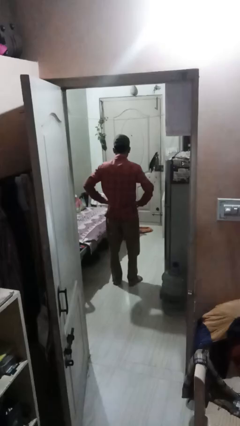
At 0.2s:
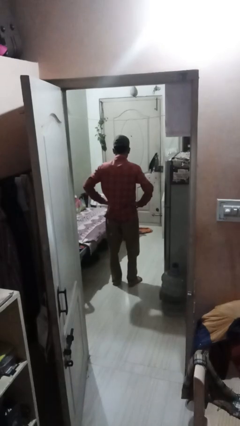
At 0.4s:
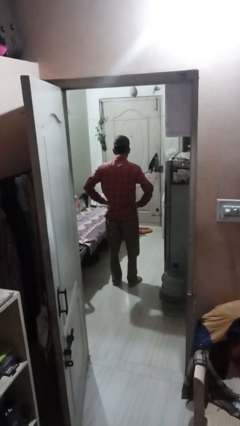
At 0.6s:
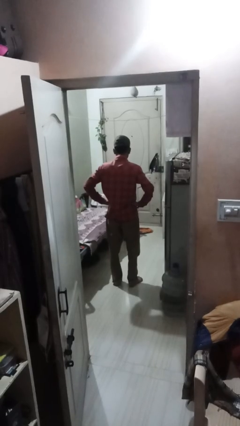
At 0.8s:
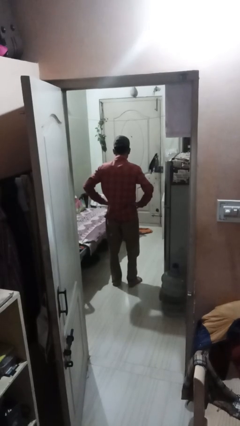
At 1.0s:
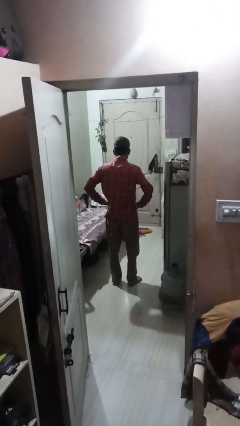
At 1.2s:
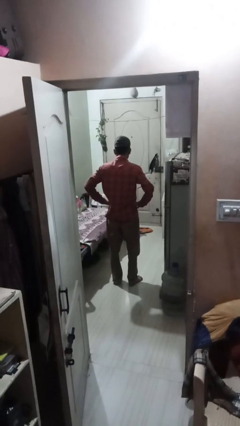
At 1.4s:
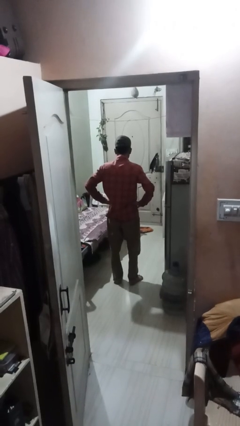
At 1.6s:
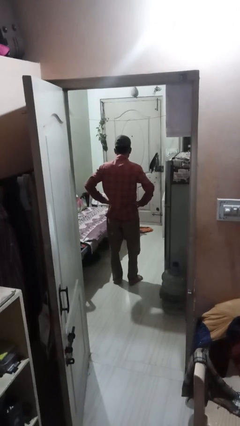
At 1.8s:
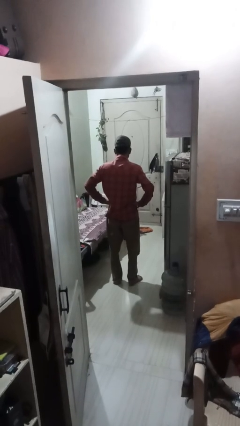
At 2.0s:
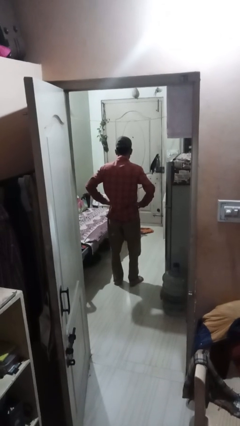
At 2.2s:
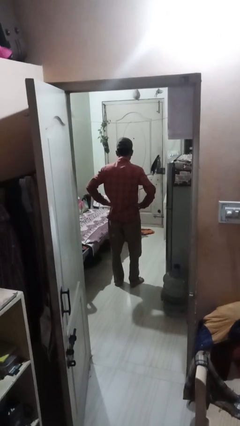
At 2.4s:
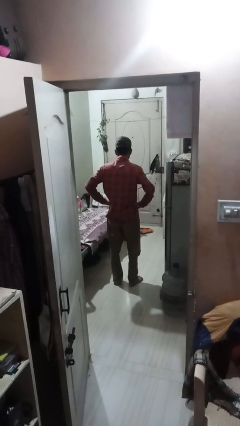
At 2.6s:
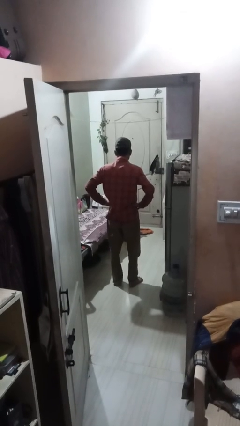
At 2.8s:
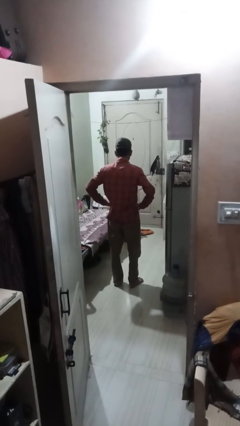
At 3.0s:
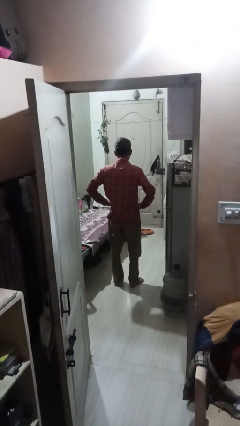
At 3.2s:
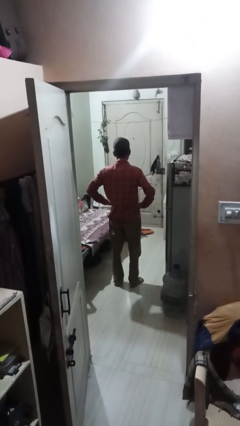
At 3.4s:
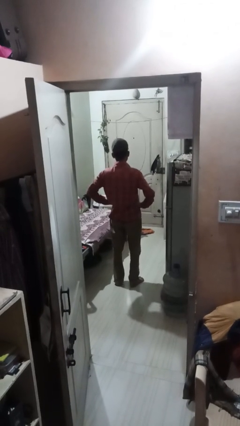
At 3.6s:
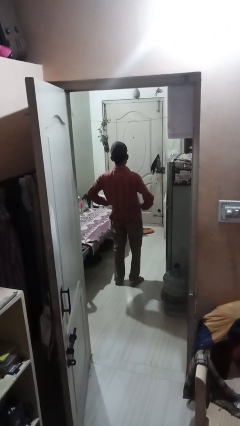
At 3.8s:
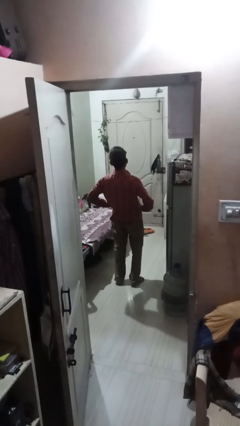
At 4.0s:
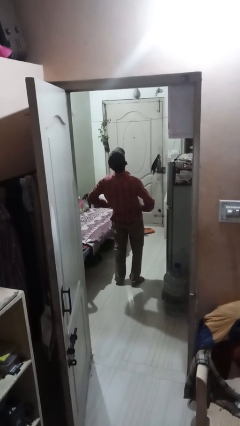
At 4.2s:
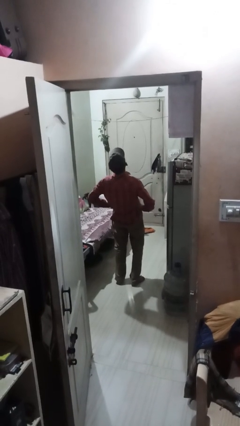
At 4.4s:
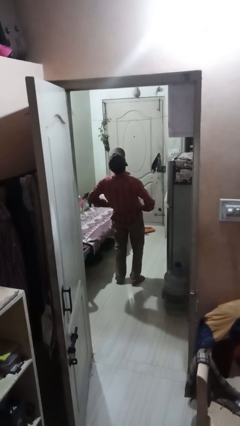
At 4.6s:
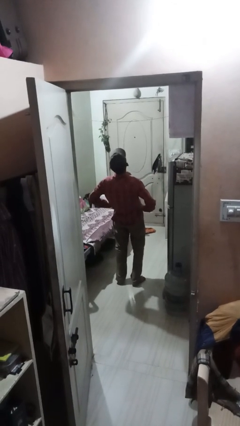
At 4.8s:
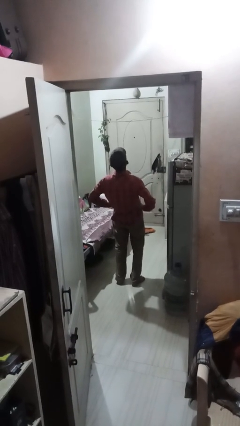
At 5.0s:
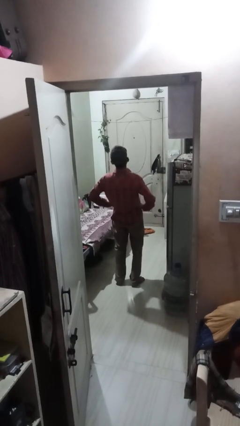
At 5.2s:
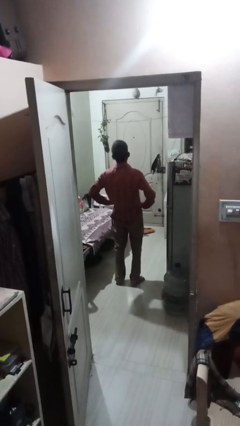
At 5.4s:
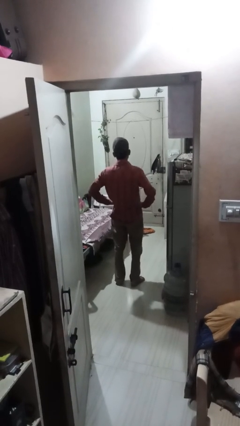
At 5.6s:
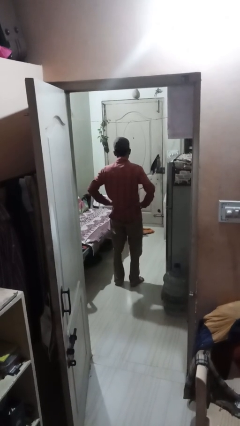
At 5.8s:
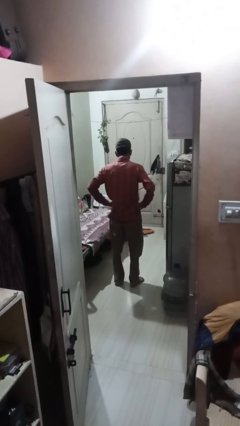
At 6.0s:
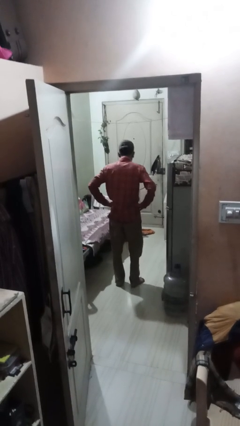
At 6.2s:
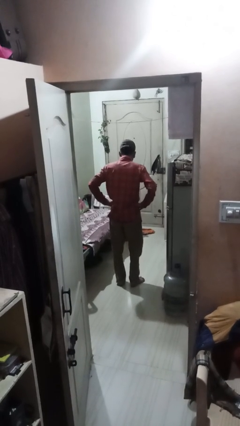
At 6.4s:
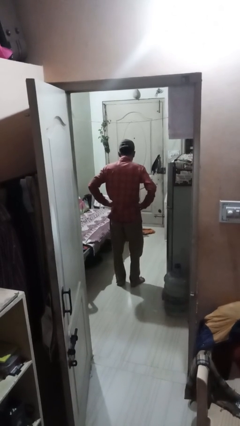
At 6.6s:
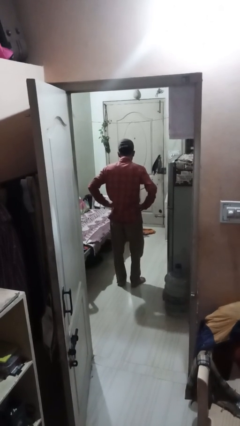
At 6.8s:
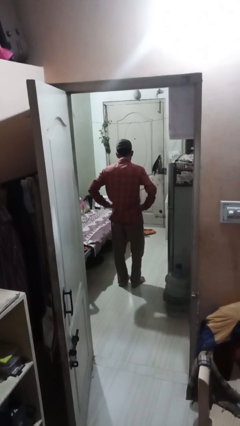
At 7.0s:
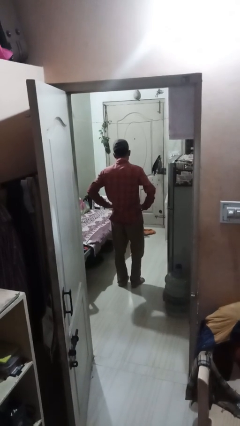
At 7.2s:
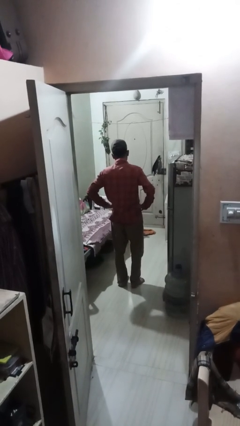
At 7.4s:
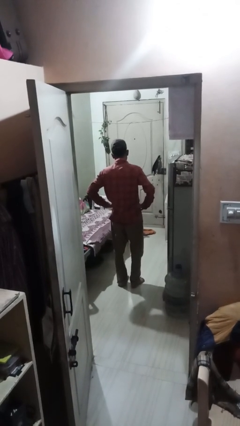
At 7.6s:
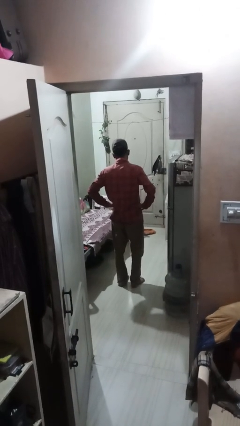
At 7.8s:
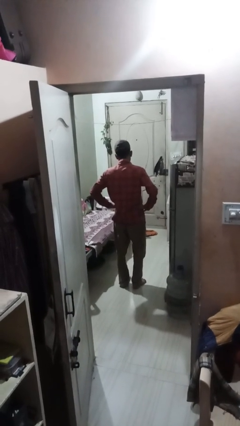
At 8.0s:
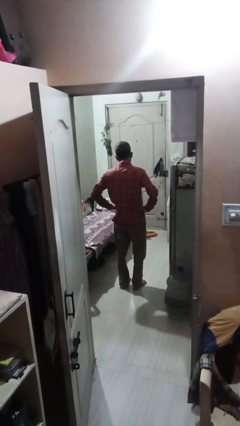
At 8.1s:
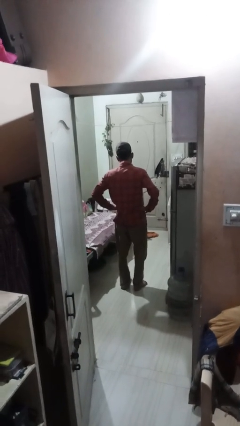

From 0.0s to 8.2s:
person stretches back

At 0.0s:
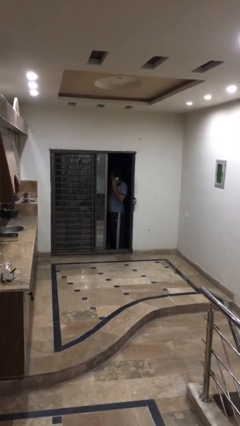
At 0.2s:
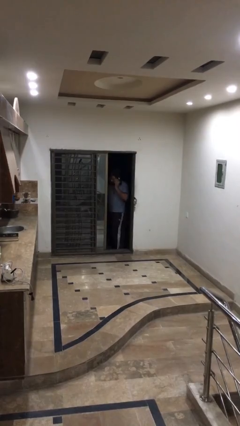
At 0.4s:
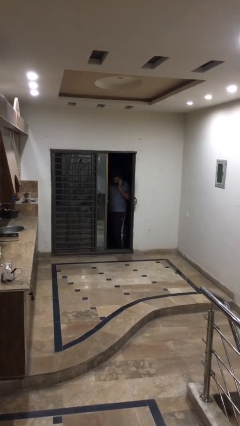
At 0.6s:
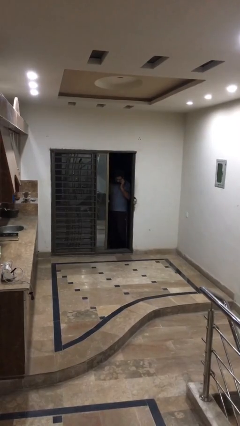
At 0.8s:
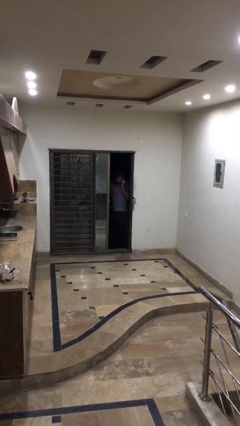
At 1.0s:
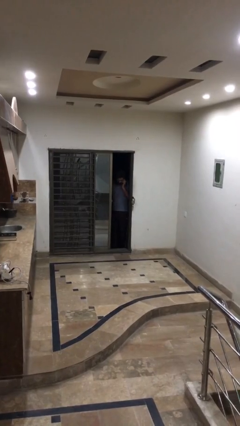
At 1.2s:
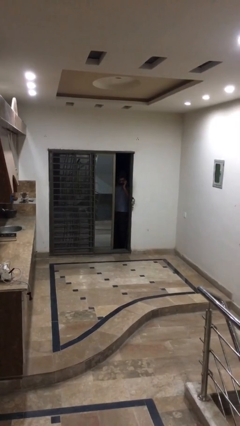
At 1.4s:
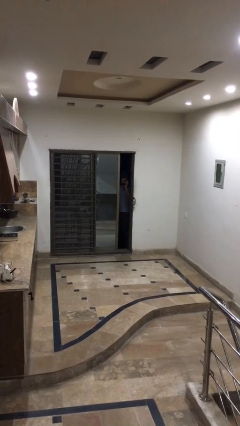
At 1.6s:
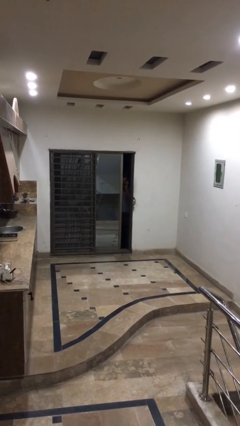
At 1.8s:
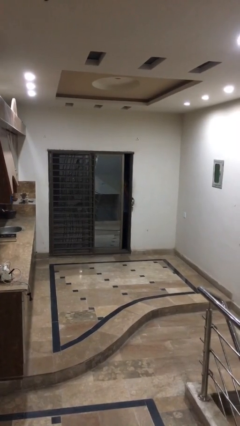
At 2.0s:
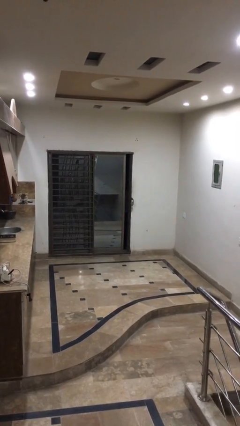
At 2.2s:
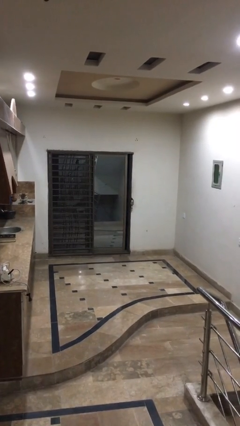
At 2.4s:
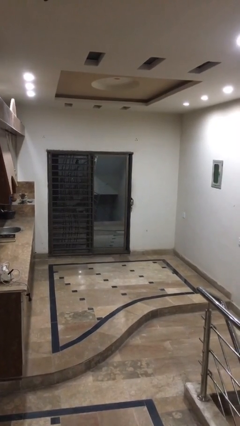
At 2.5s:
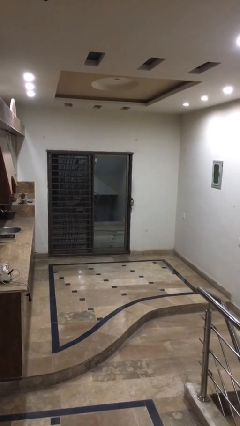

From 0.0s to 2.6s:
person closes facility door

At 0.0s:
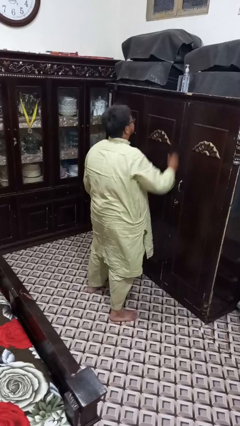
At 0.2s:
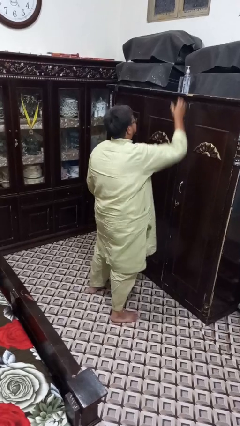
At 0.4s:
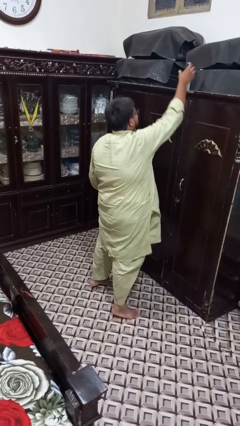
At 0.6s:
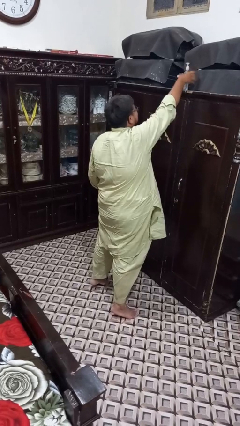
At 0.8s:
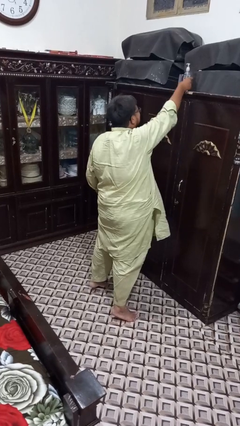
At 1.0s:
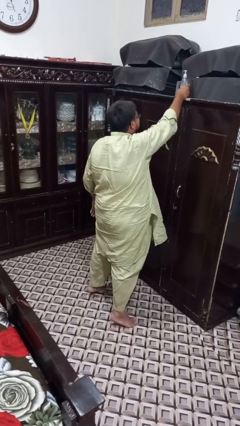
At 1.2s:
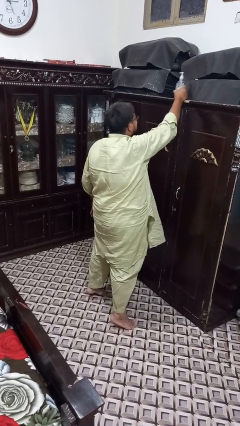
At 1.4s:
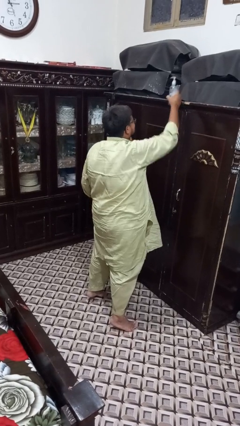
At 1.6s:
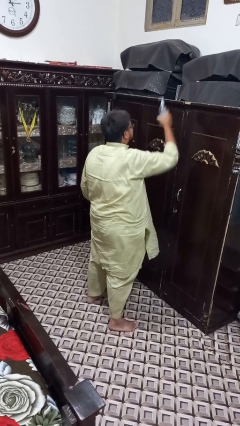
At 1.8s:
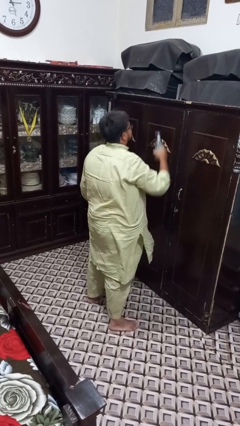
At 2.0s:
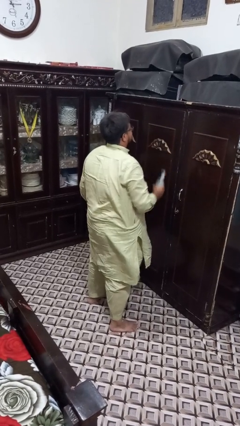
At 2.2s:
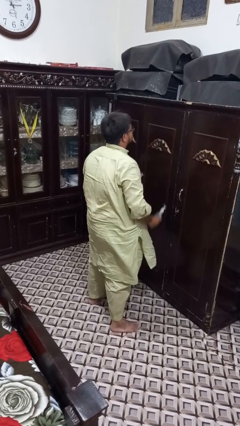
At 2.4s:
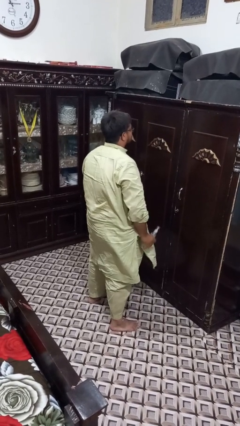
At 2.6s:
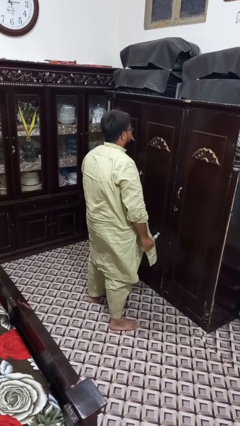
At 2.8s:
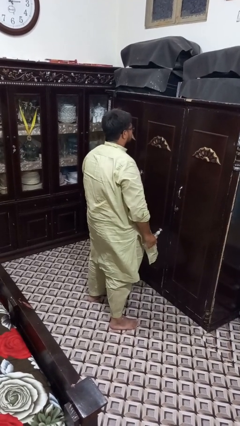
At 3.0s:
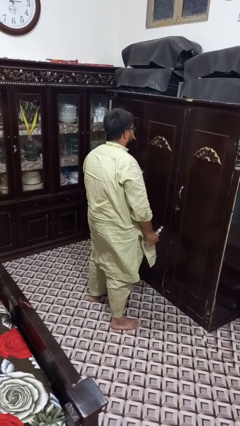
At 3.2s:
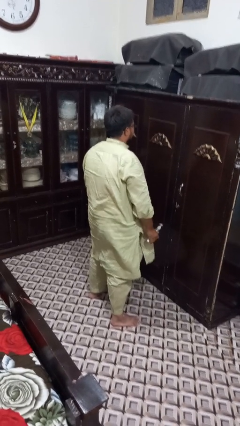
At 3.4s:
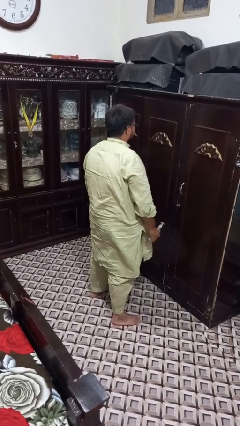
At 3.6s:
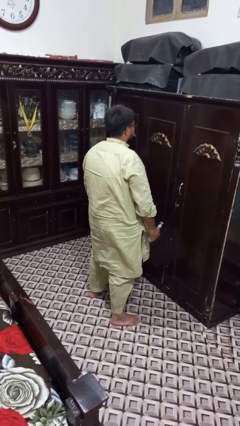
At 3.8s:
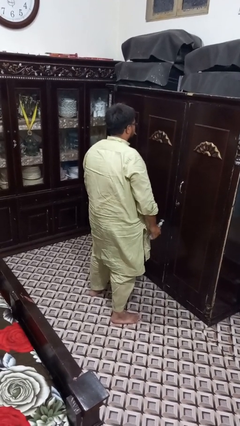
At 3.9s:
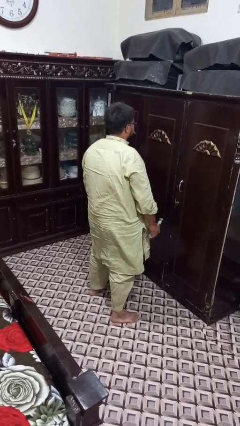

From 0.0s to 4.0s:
person picks up object from cabinet

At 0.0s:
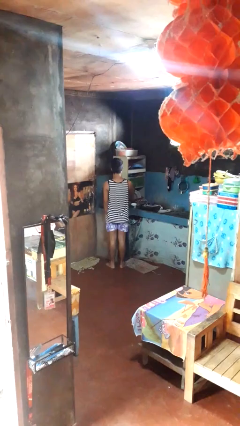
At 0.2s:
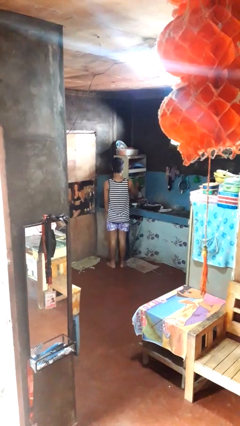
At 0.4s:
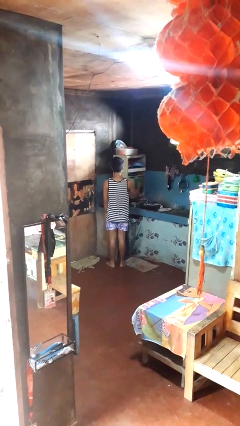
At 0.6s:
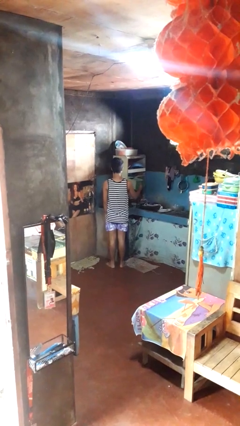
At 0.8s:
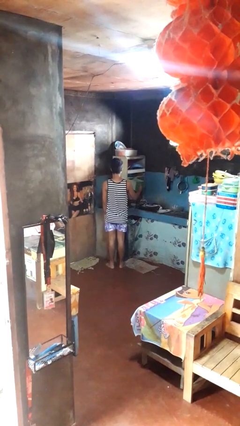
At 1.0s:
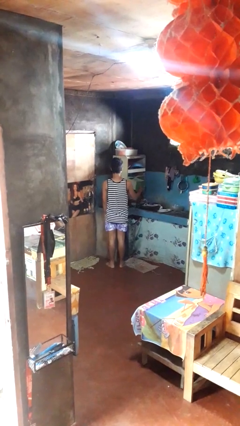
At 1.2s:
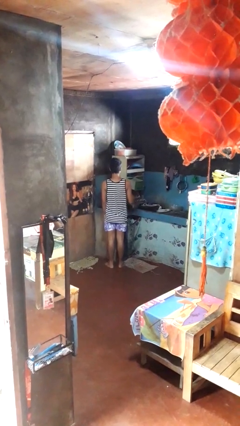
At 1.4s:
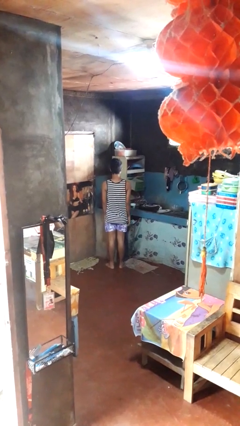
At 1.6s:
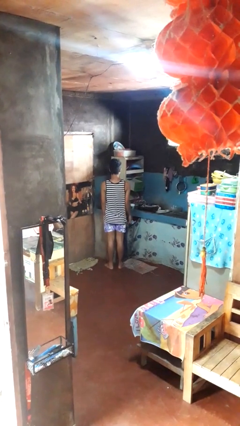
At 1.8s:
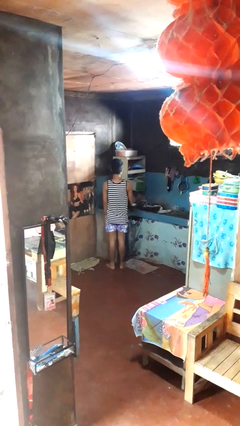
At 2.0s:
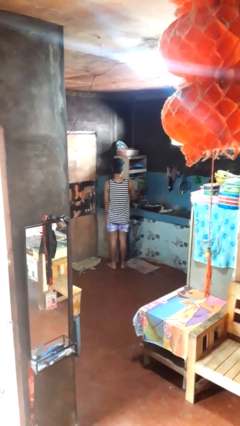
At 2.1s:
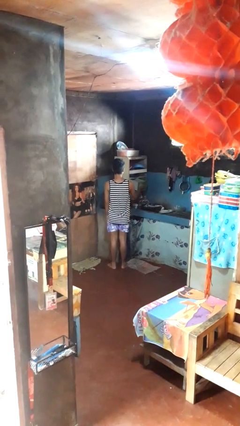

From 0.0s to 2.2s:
person opens kitchen drawer

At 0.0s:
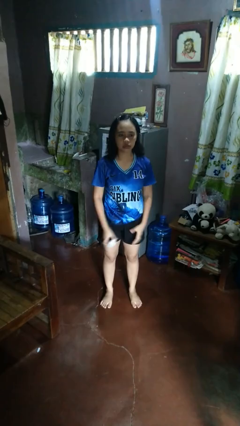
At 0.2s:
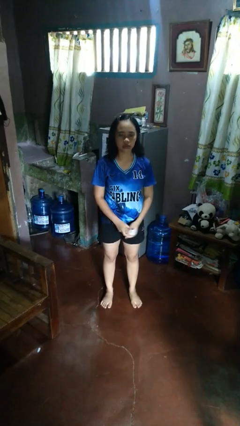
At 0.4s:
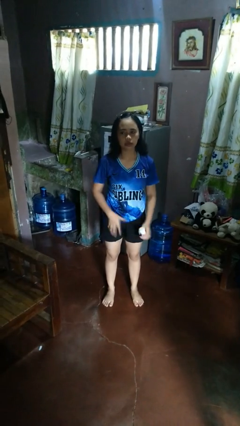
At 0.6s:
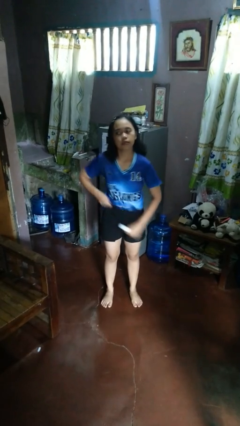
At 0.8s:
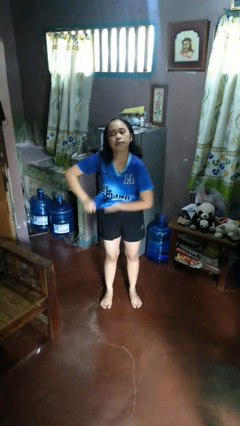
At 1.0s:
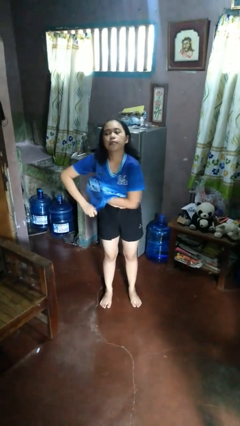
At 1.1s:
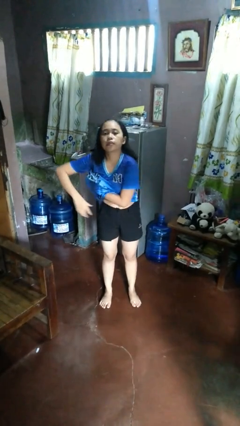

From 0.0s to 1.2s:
person applies deodorant
